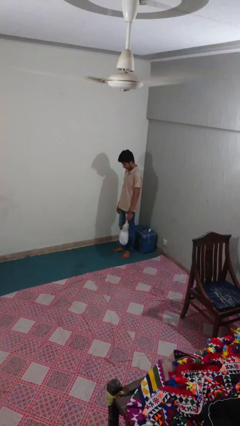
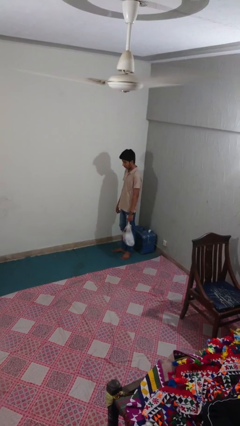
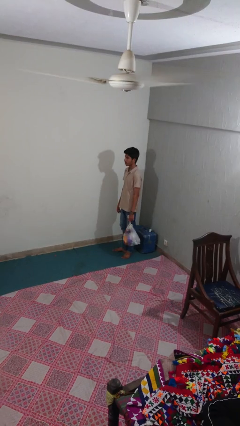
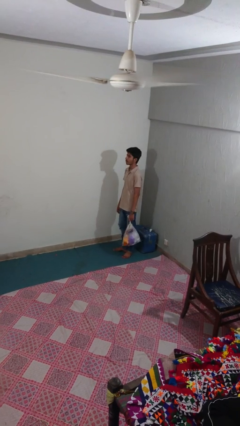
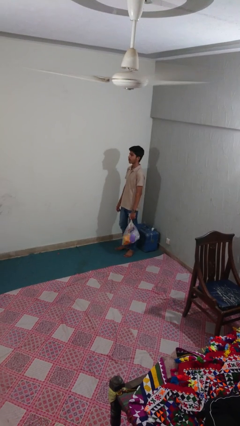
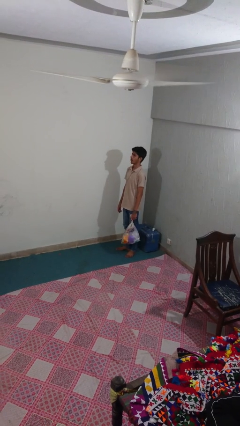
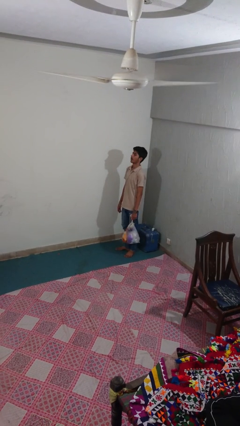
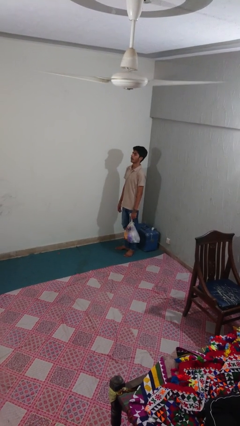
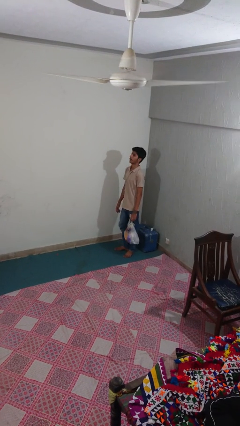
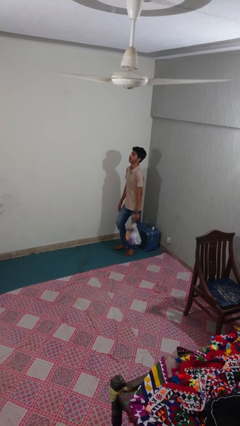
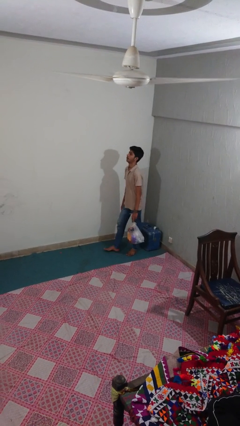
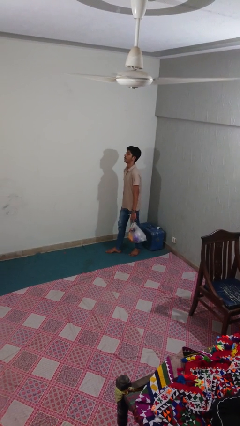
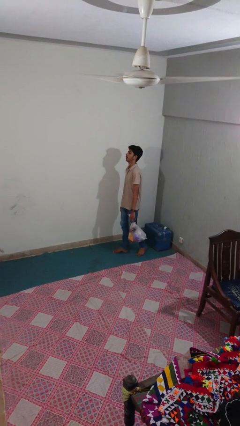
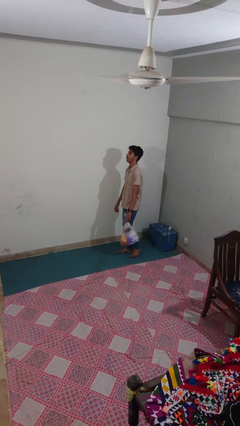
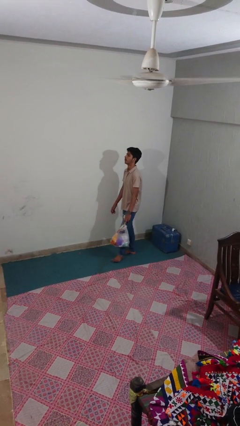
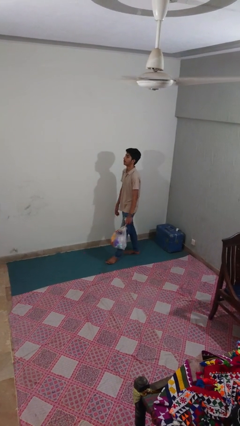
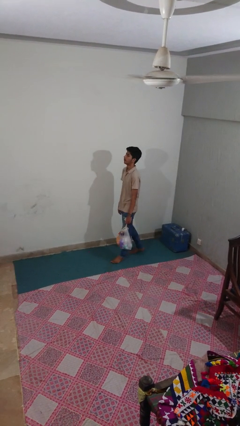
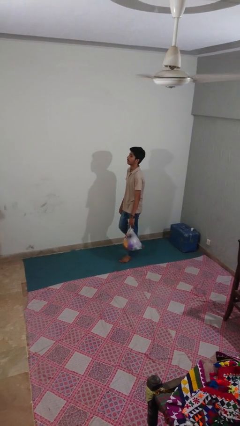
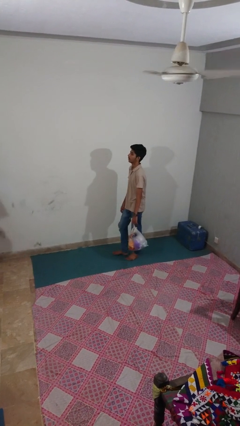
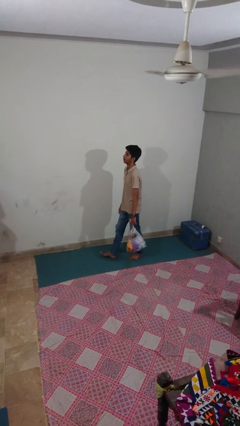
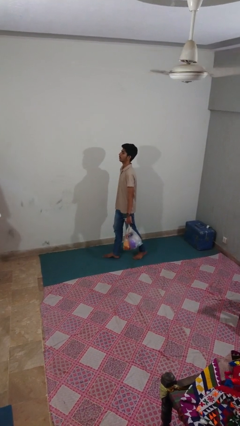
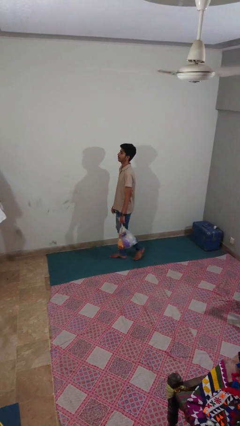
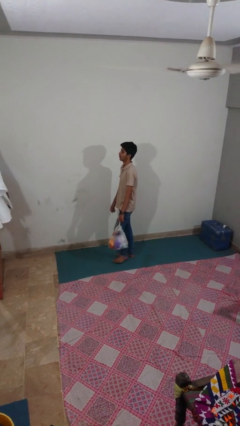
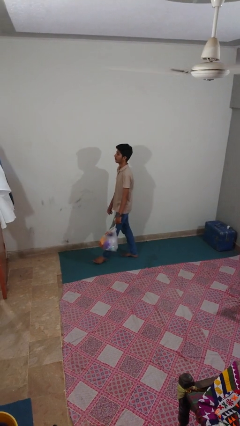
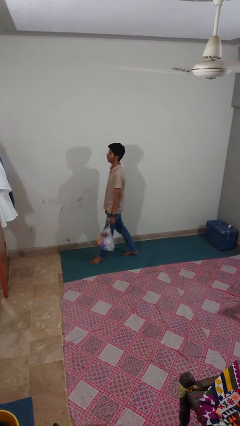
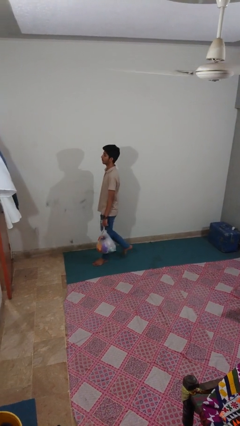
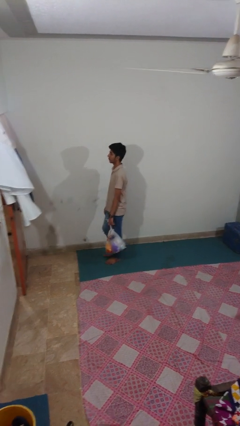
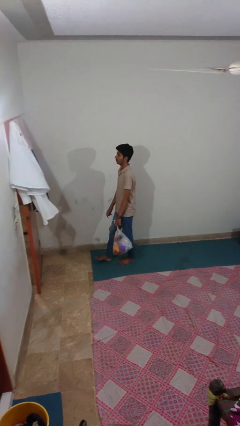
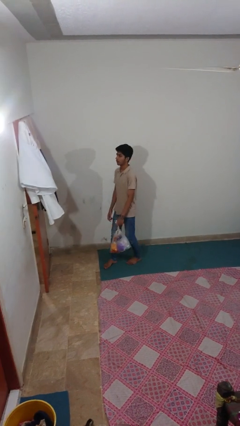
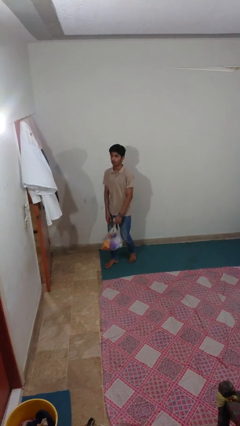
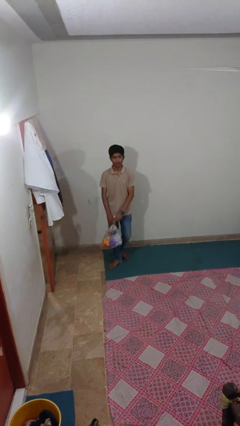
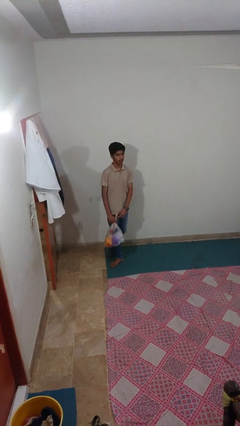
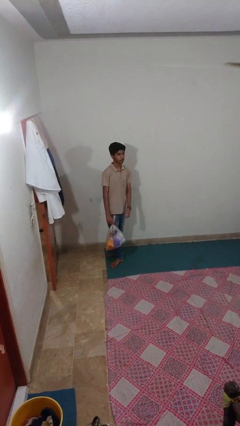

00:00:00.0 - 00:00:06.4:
person carries groceries

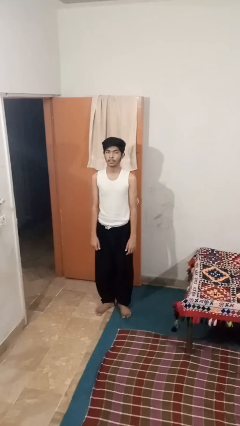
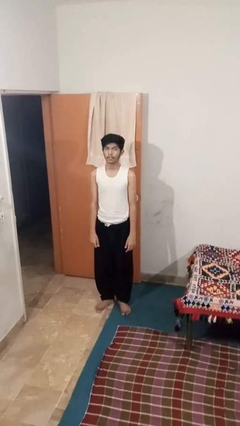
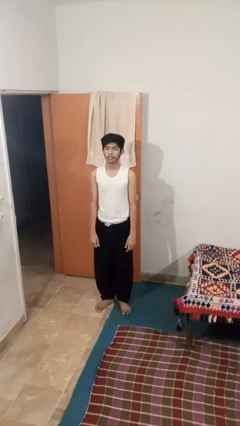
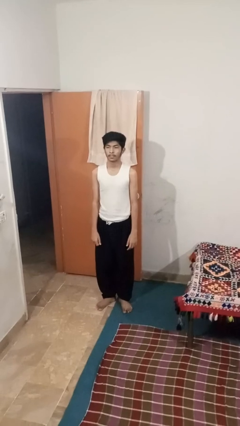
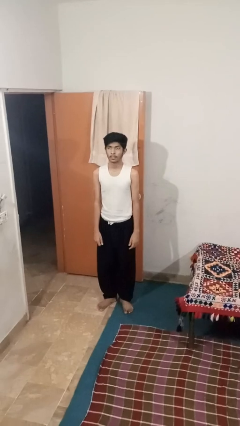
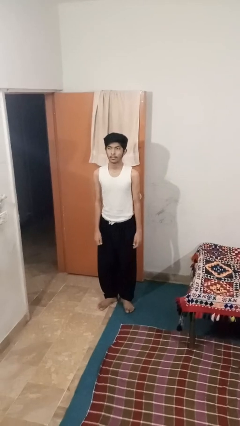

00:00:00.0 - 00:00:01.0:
person exercises with jumping jacks

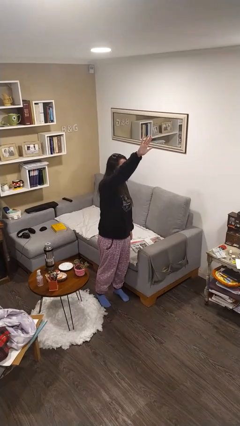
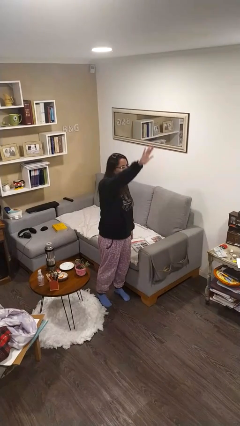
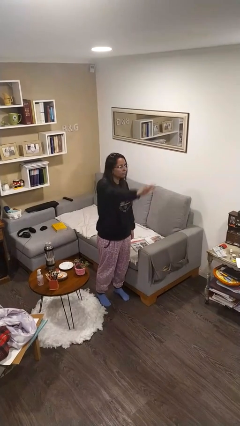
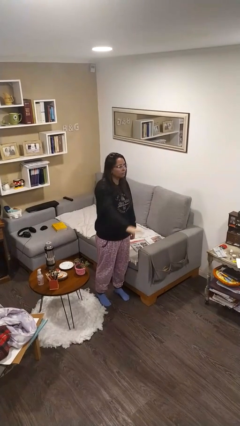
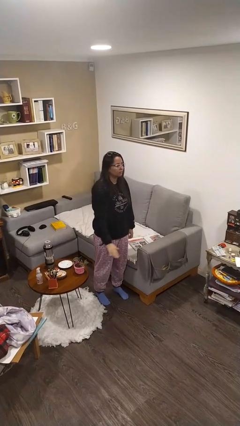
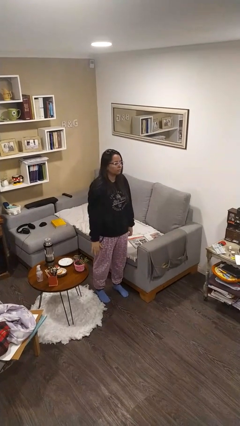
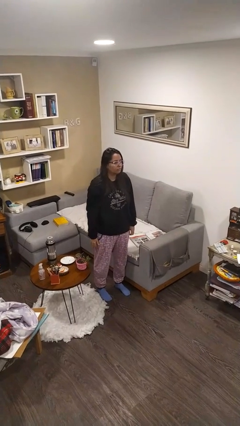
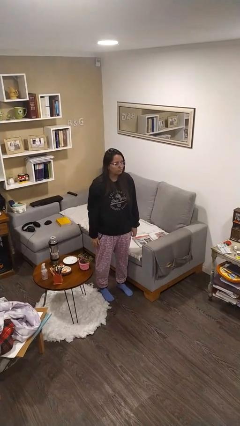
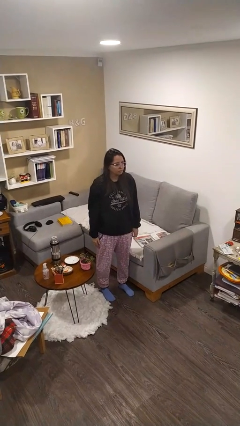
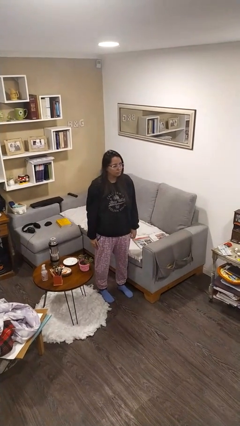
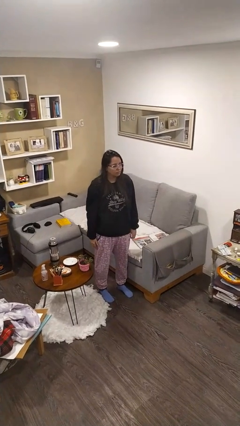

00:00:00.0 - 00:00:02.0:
person gestures lower hand

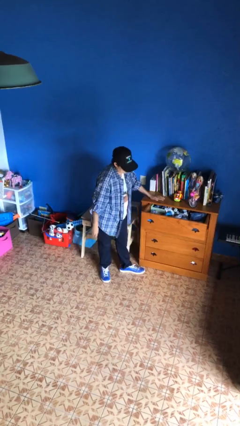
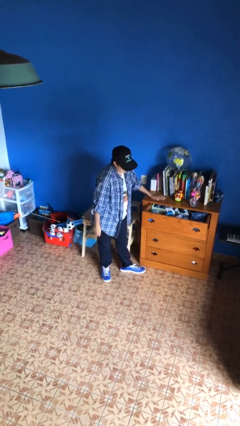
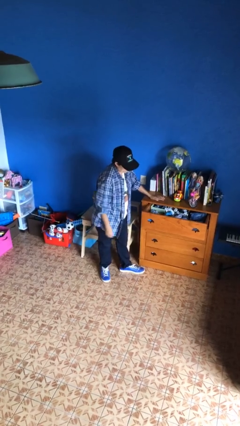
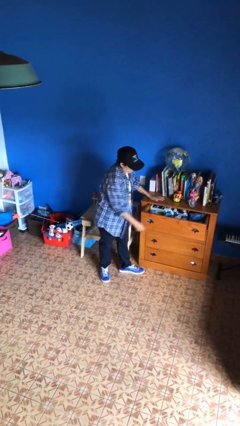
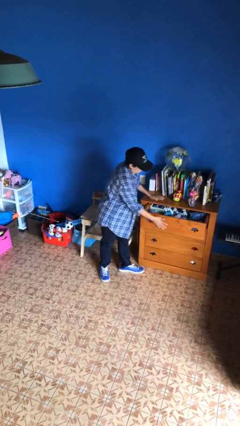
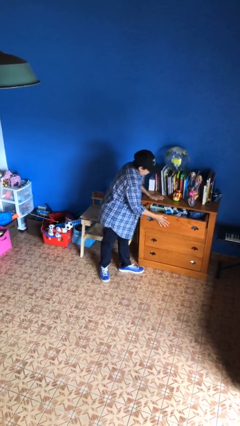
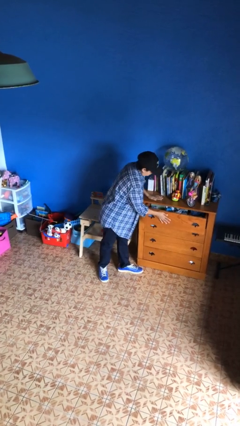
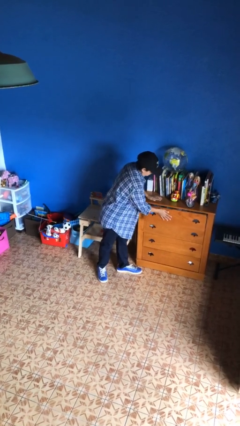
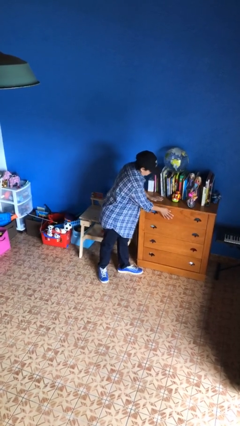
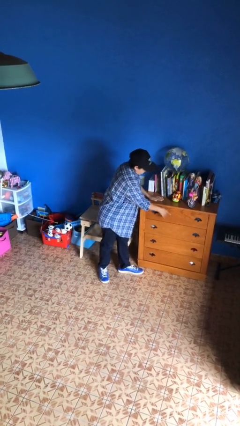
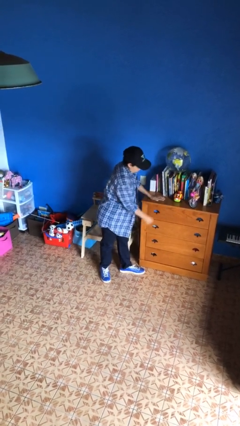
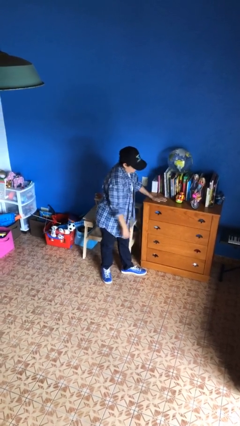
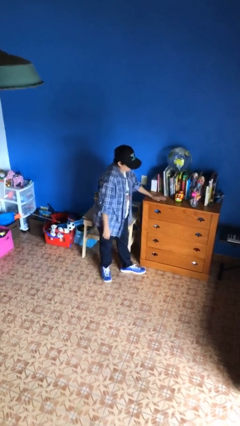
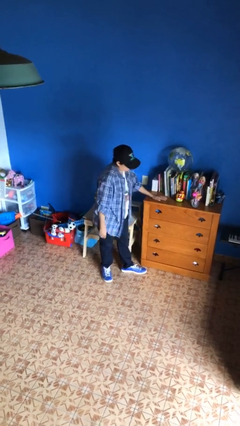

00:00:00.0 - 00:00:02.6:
person closes dresser drawer

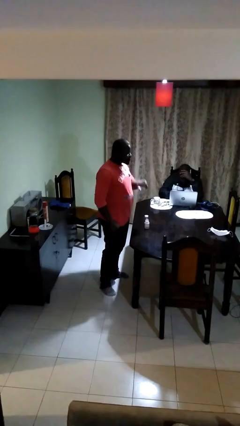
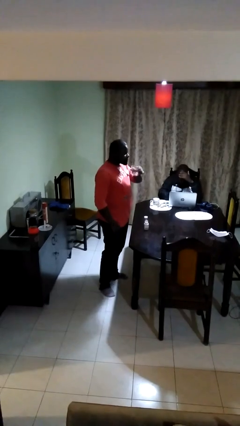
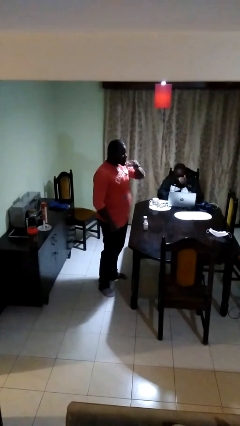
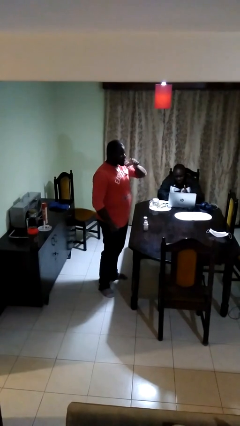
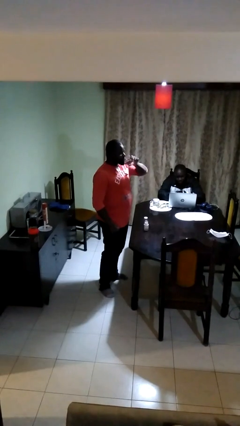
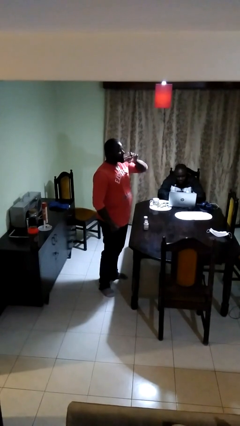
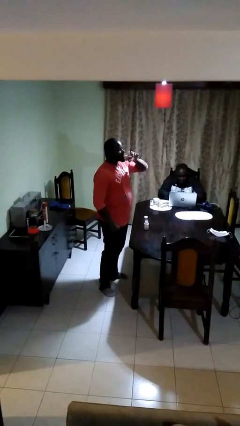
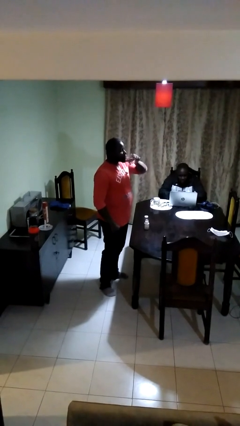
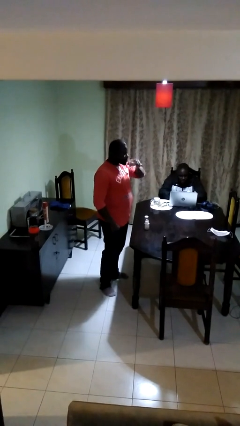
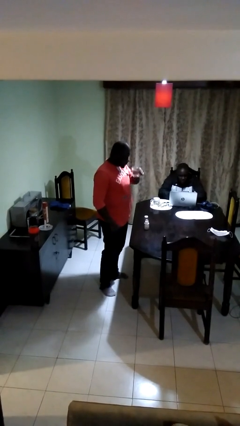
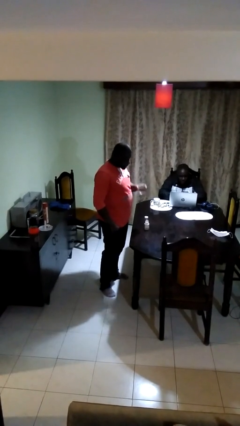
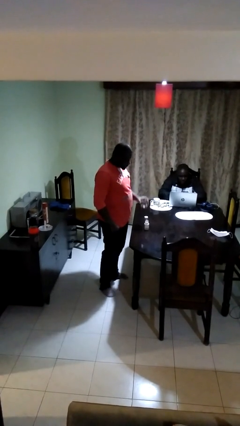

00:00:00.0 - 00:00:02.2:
person drinks from cup

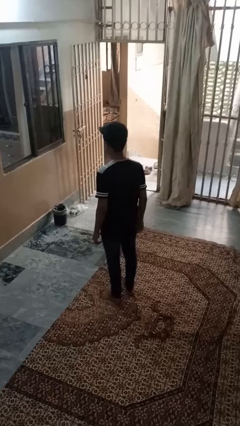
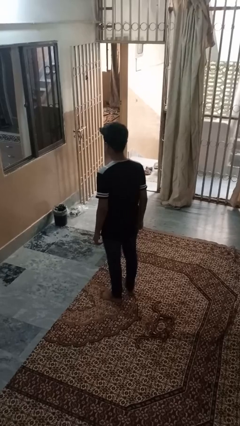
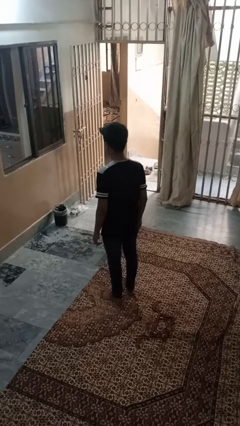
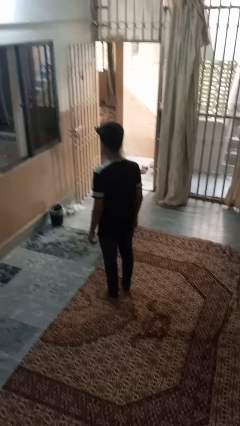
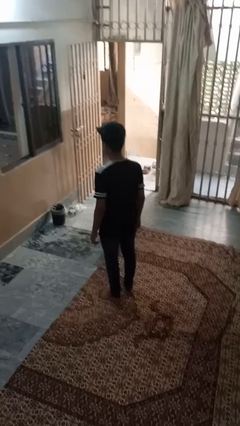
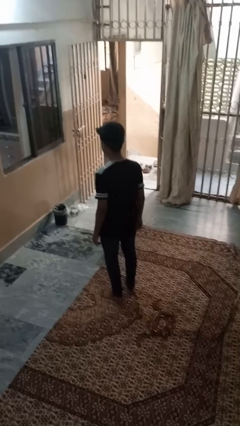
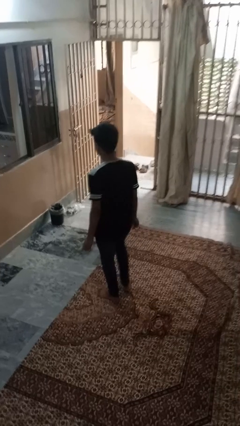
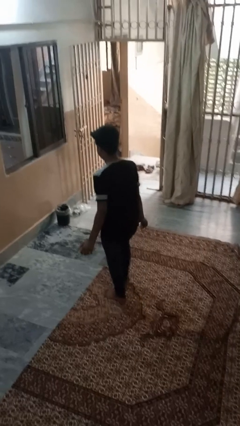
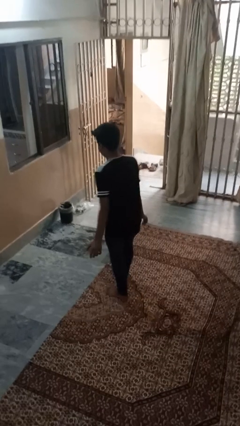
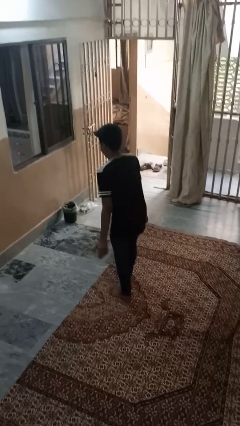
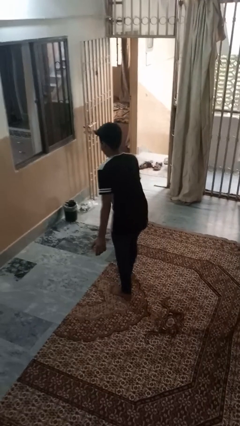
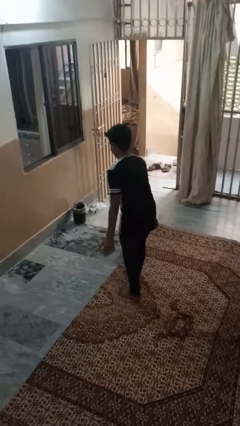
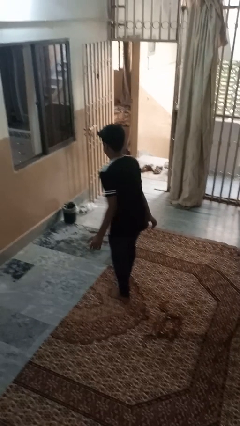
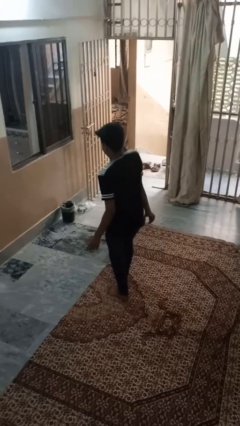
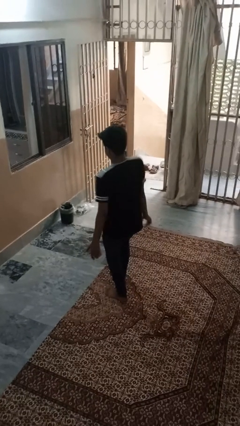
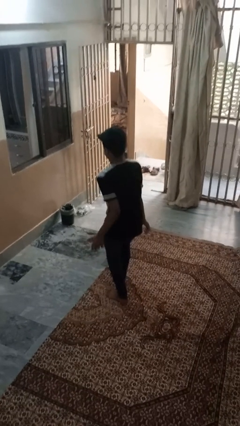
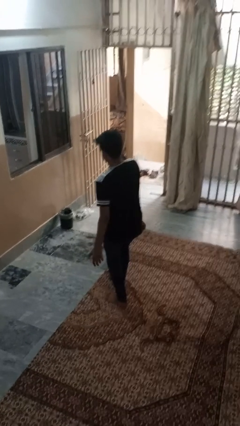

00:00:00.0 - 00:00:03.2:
person dances in place

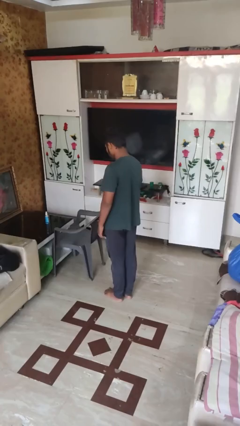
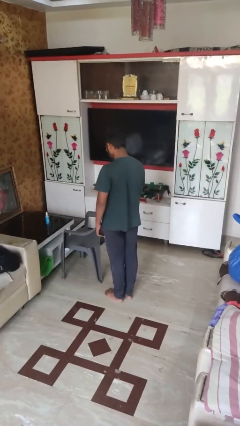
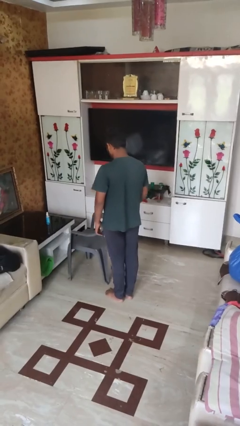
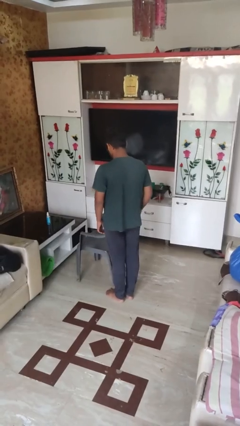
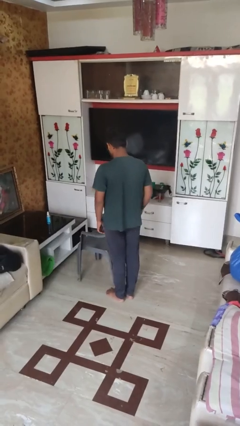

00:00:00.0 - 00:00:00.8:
person pulls out chair
